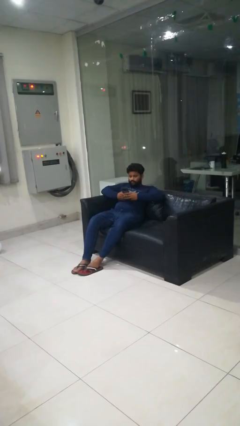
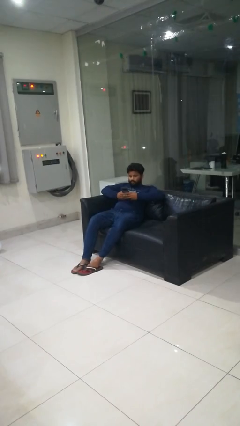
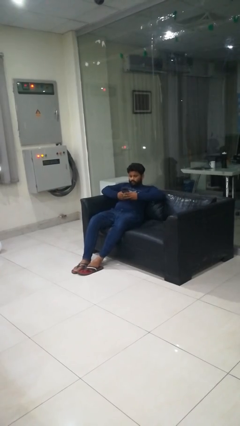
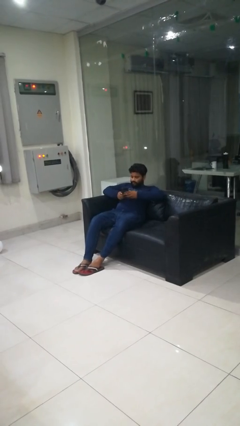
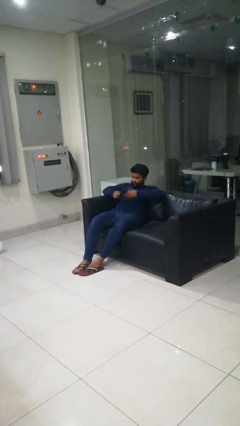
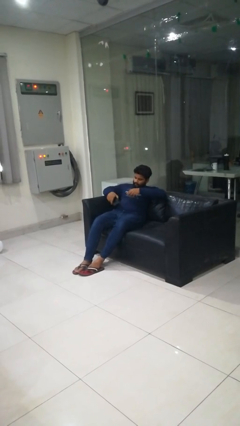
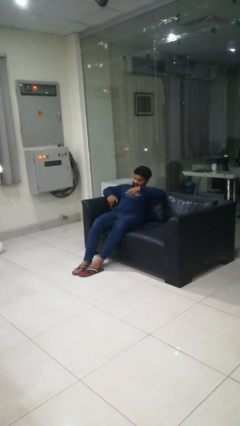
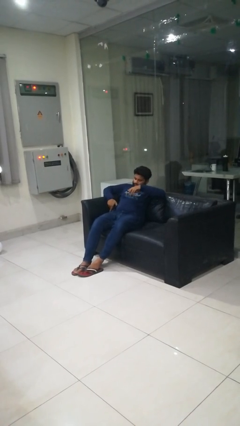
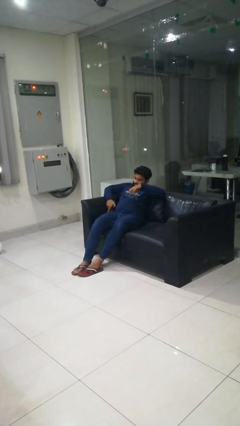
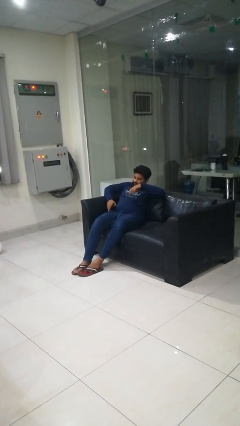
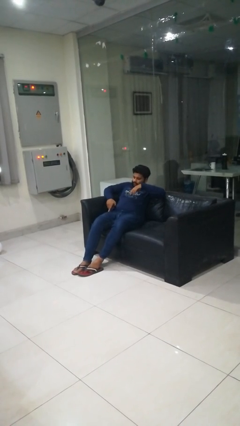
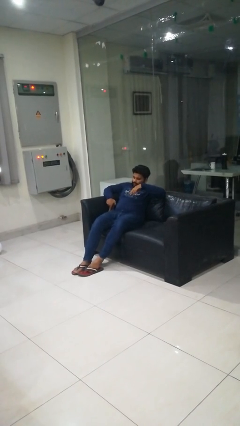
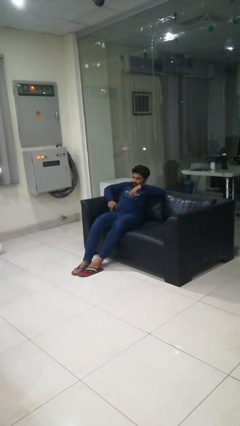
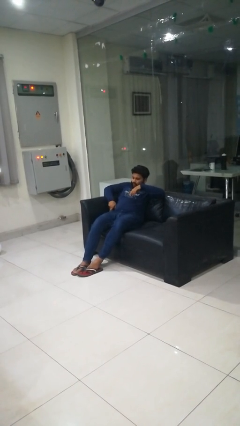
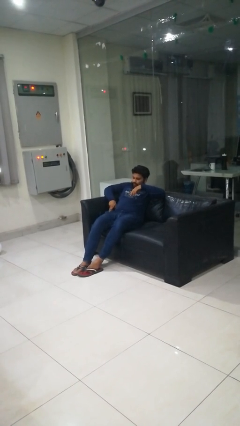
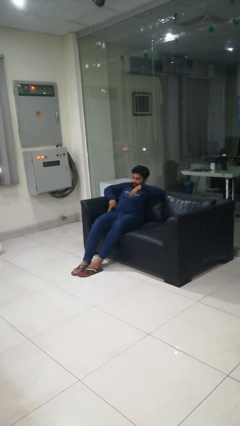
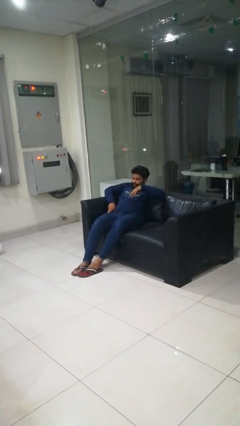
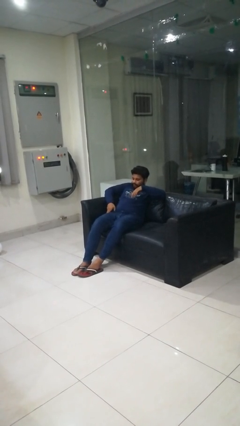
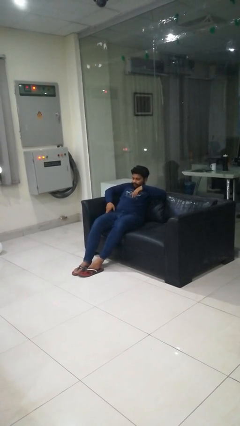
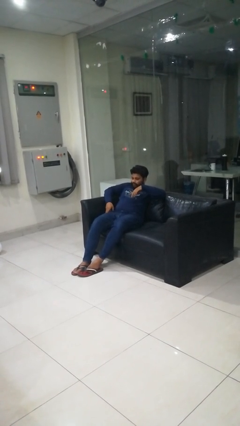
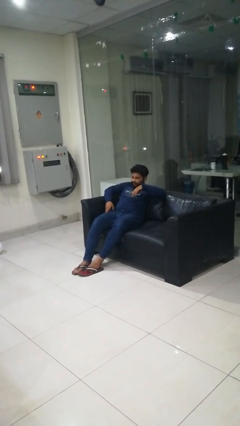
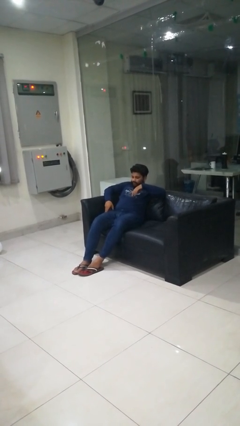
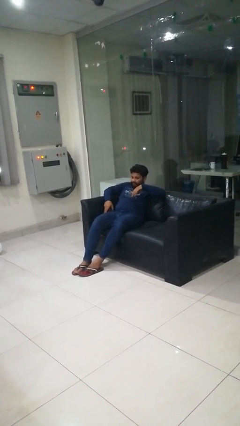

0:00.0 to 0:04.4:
person puts phone into pocket

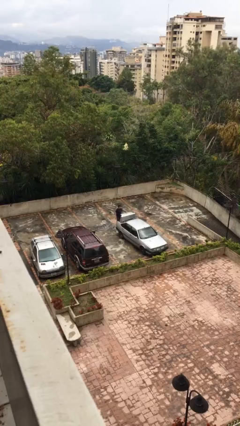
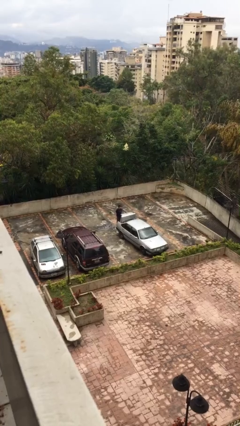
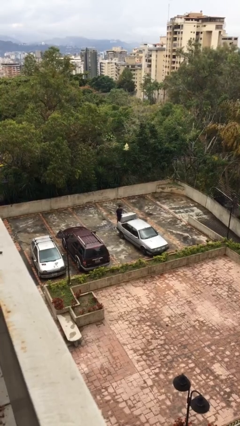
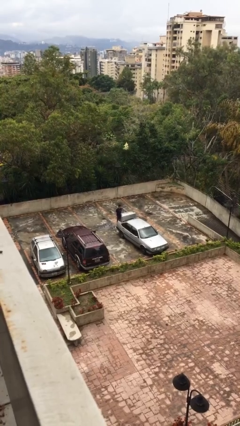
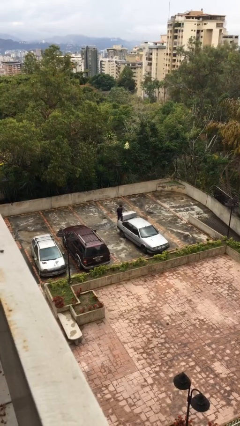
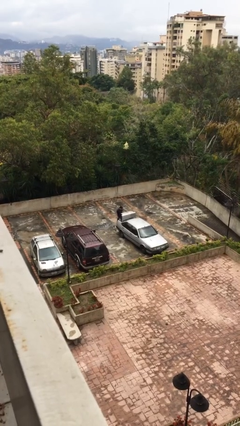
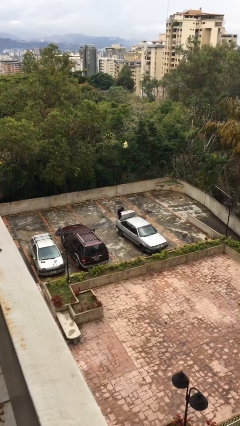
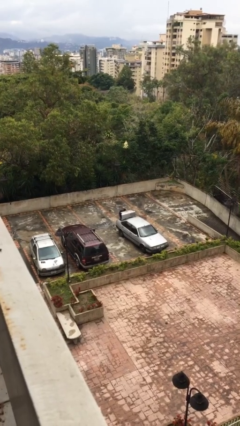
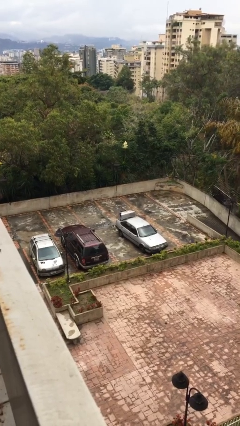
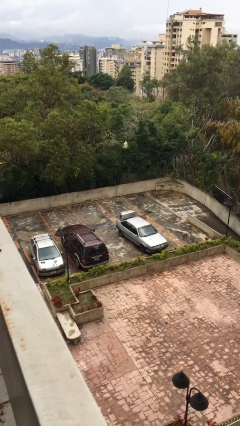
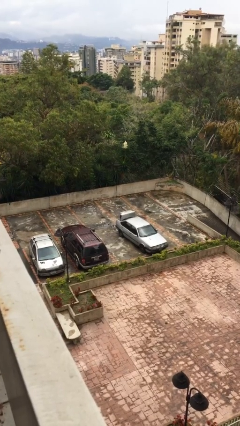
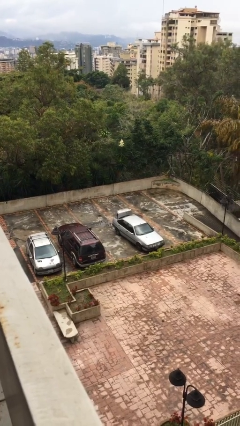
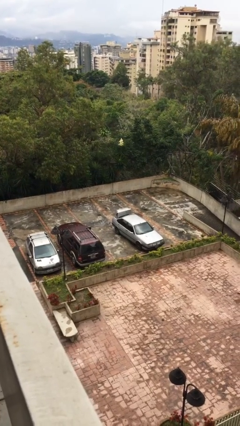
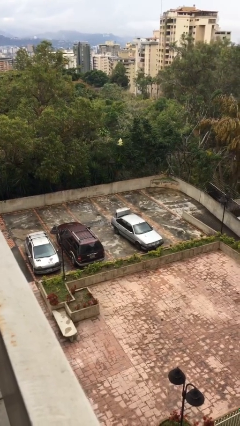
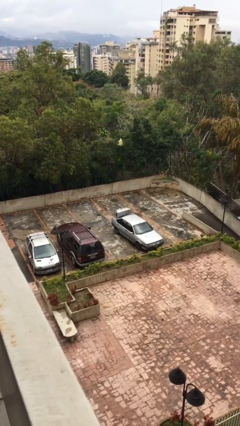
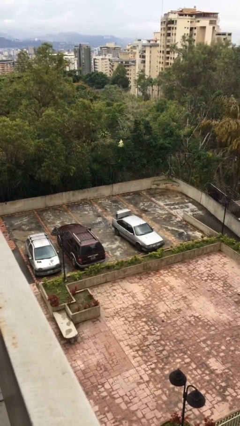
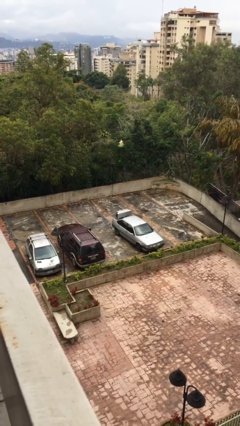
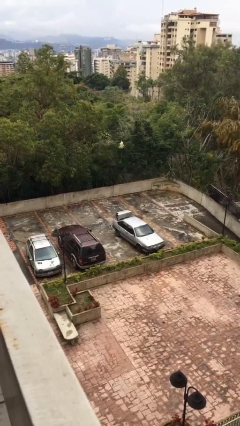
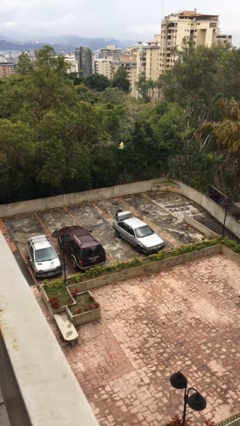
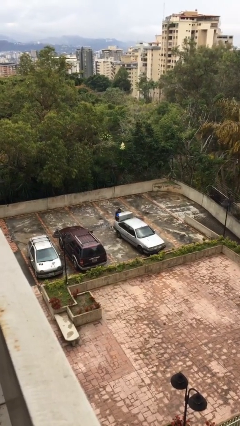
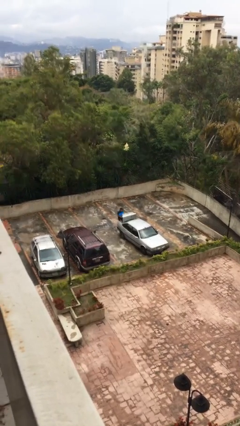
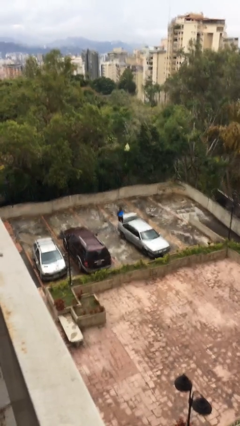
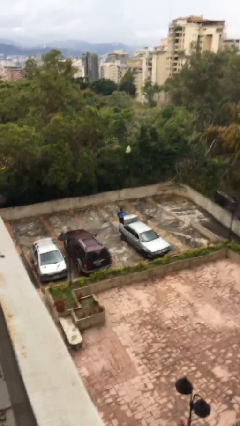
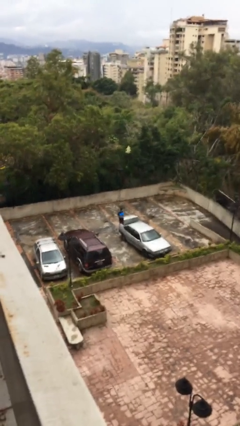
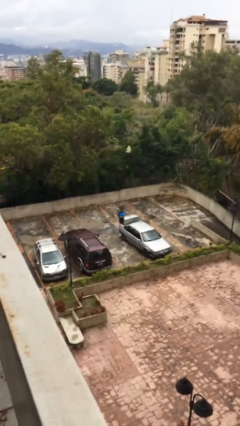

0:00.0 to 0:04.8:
person unloads car

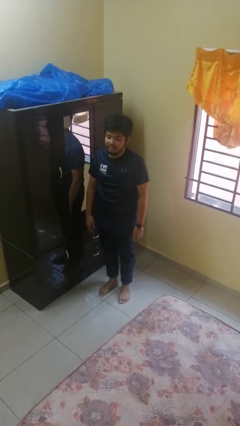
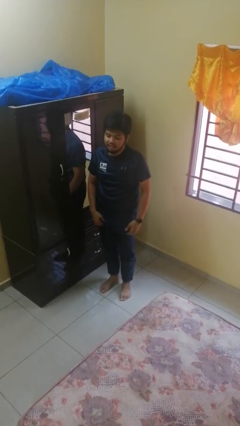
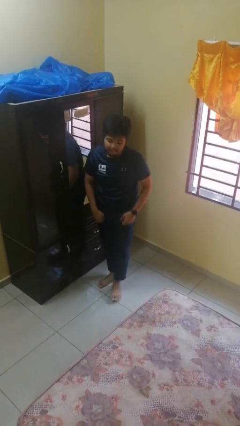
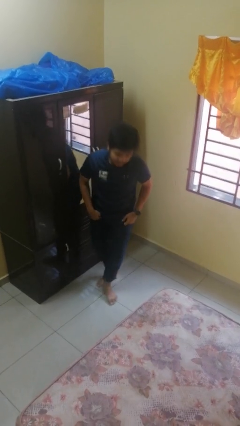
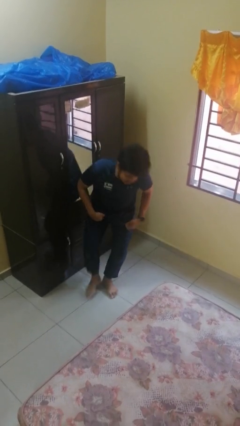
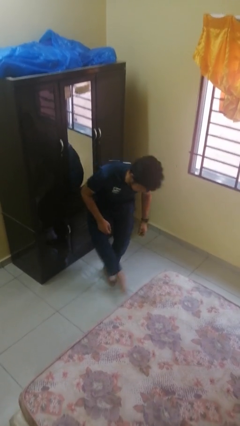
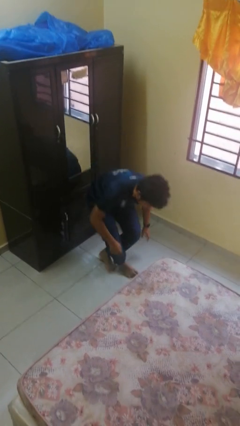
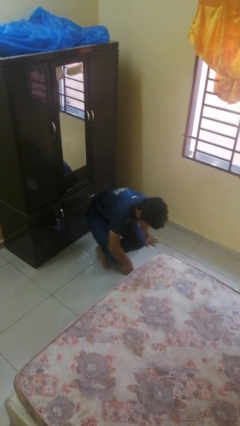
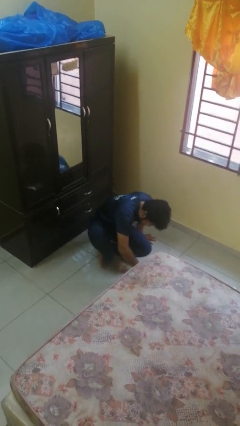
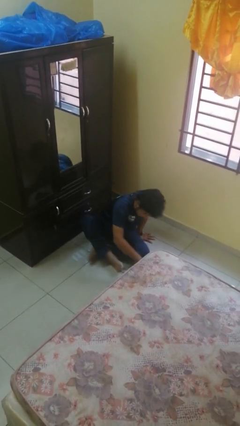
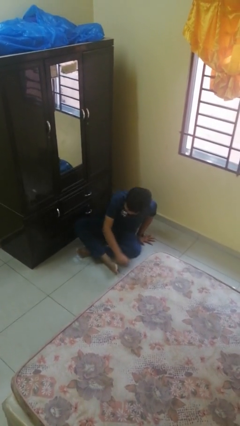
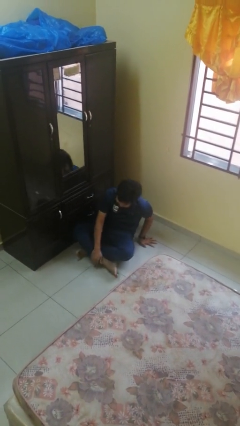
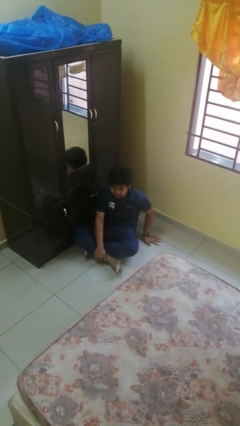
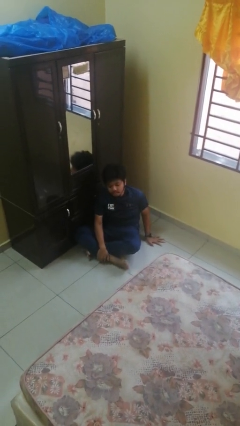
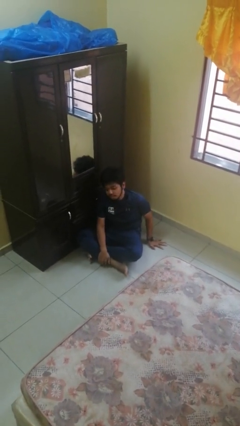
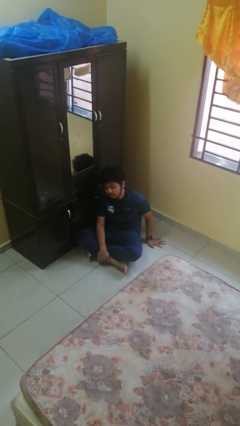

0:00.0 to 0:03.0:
person sits crisscross

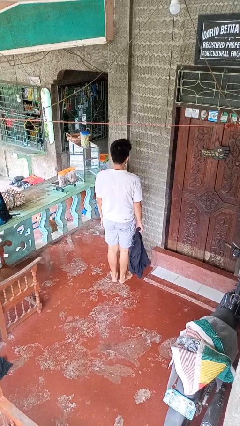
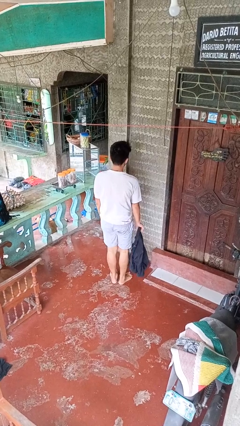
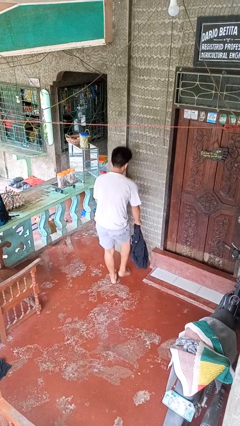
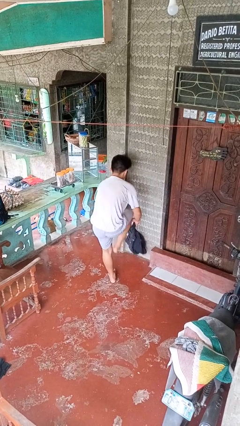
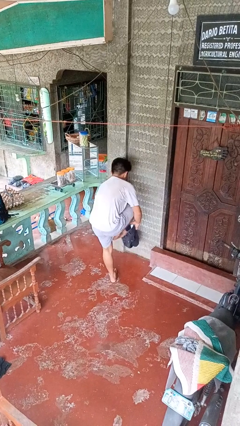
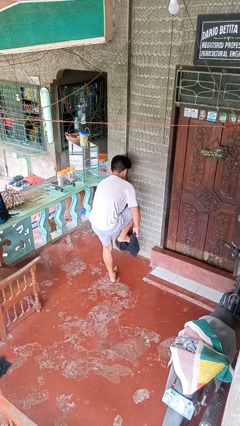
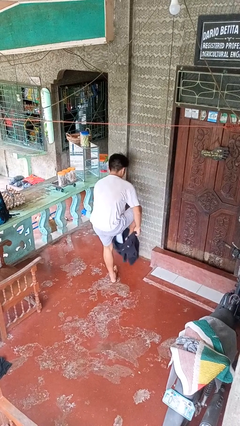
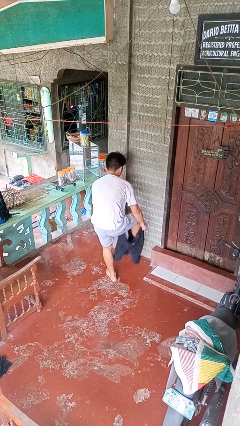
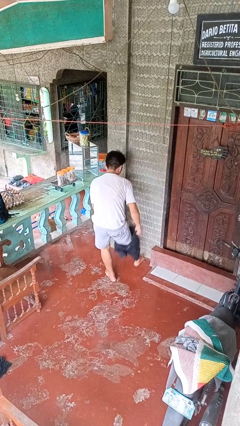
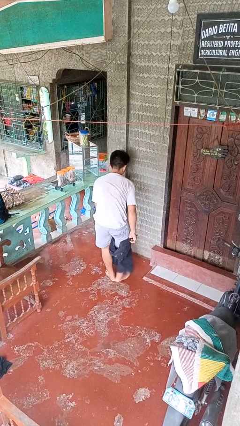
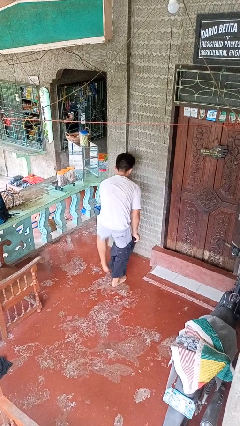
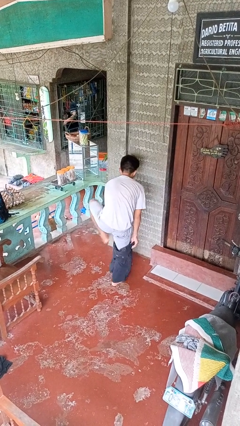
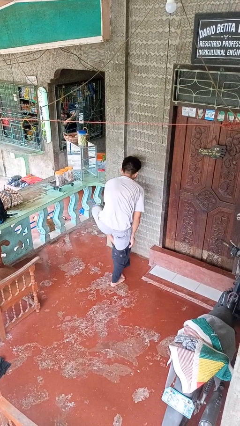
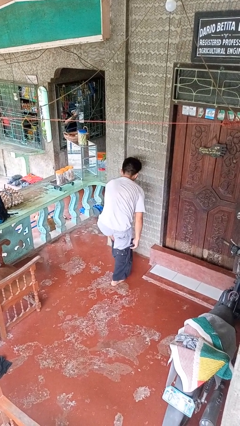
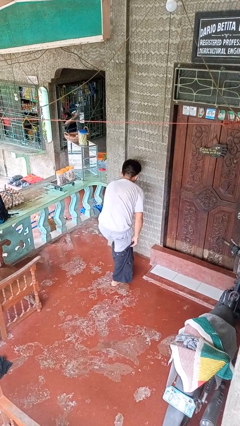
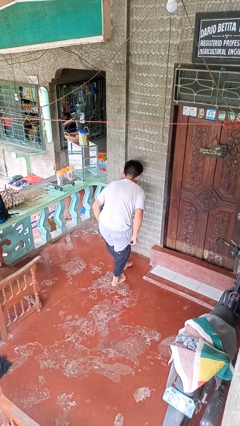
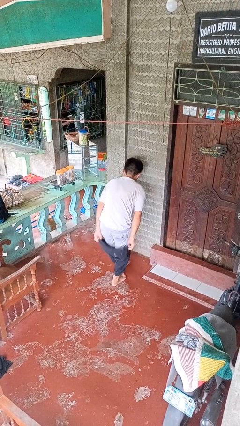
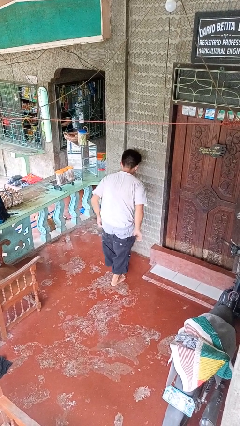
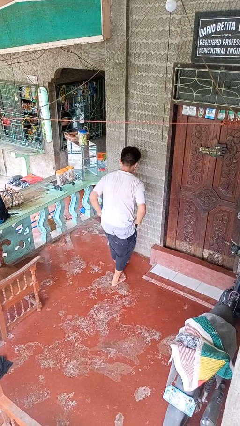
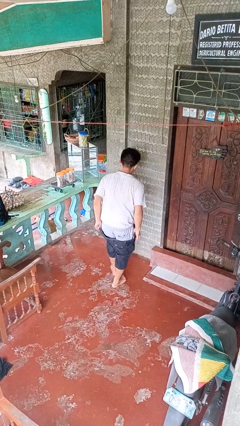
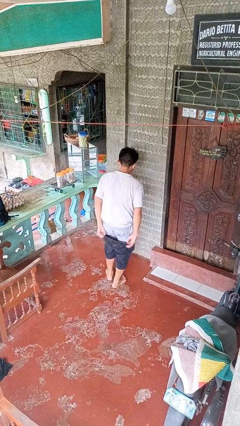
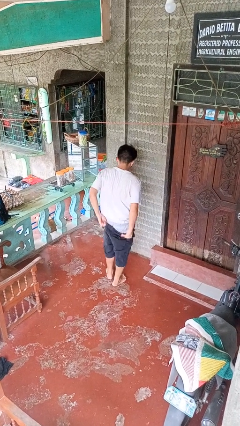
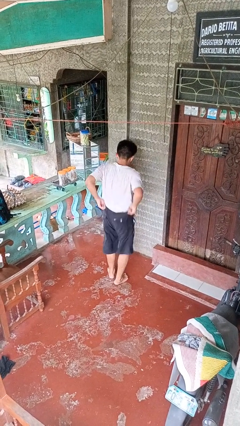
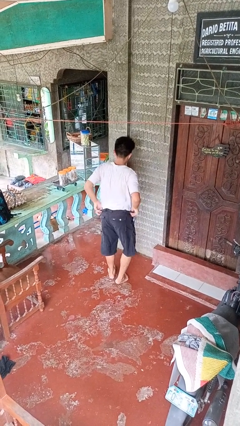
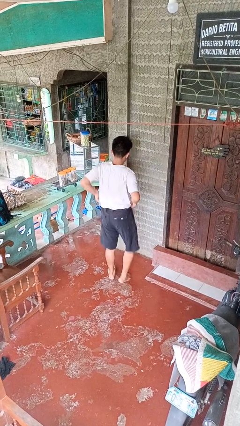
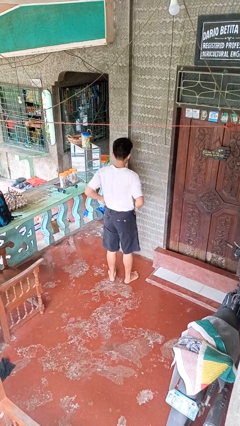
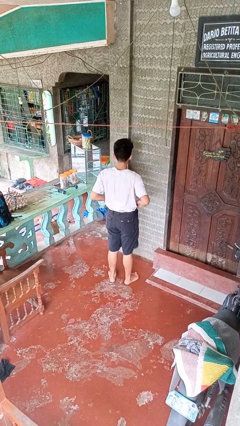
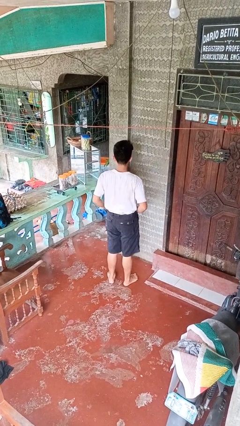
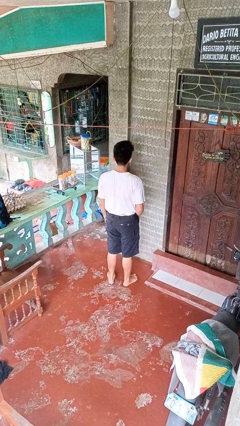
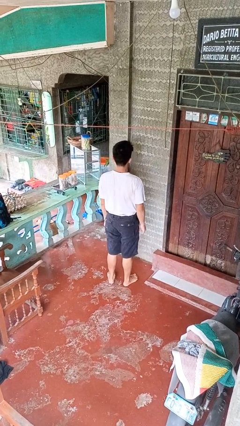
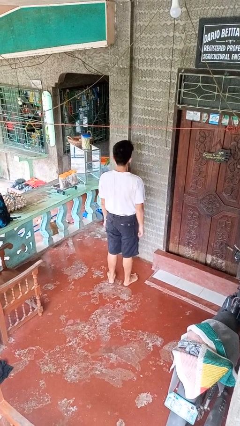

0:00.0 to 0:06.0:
person puts on pants
